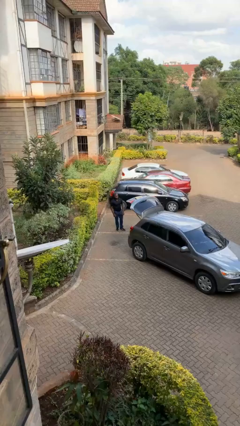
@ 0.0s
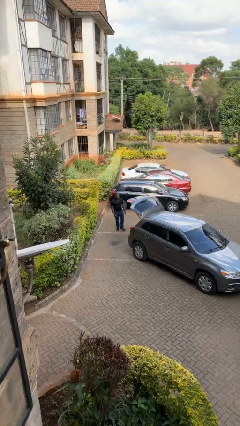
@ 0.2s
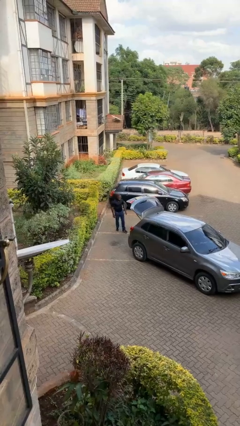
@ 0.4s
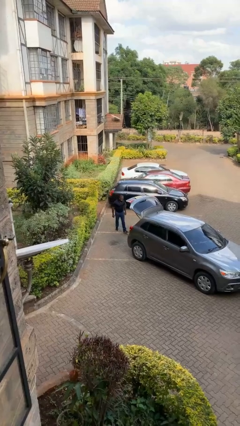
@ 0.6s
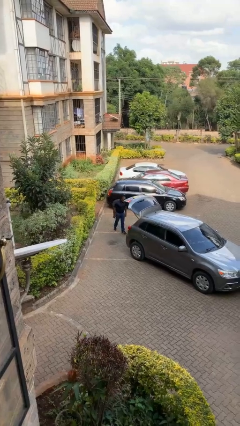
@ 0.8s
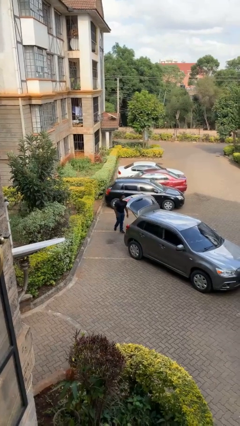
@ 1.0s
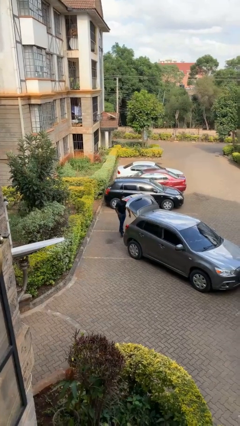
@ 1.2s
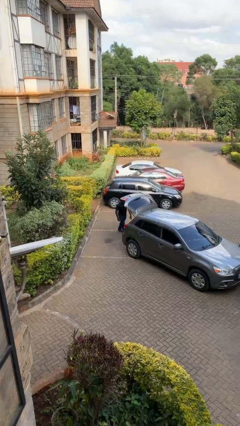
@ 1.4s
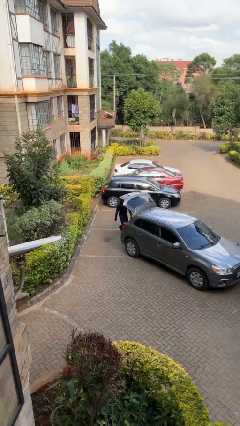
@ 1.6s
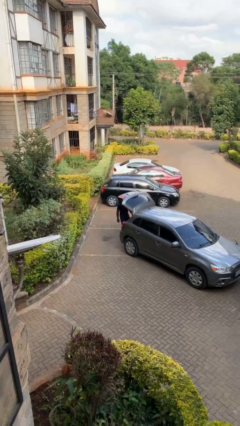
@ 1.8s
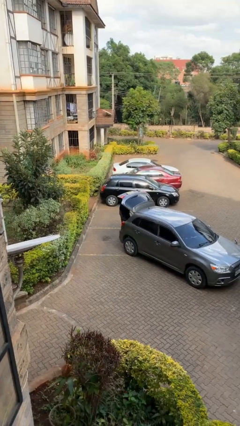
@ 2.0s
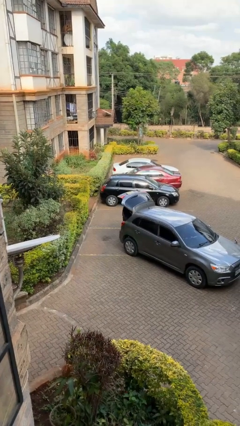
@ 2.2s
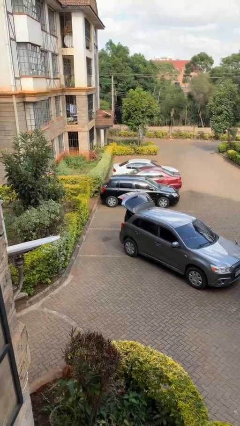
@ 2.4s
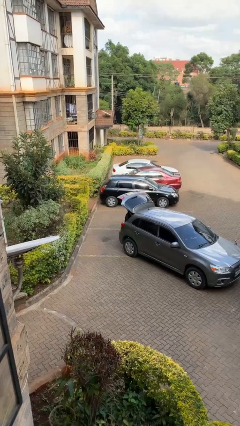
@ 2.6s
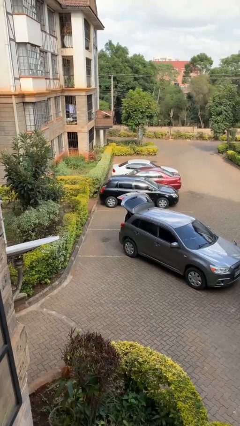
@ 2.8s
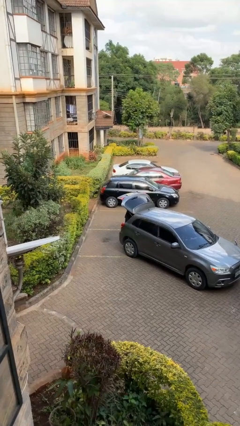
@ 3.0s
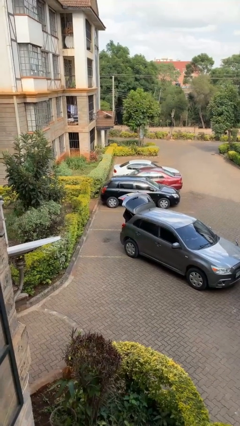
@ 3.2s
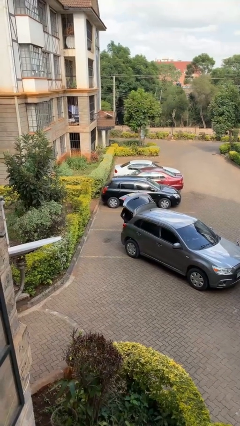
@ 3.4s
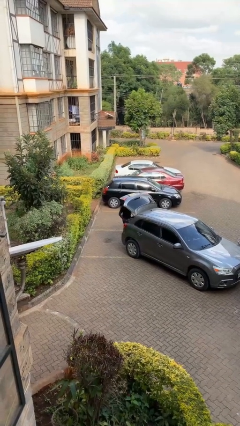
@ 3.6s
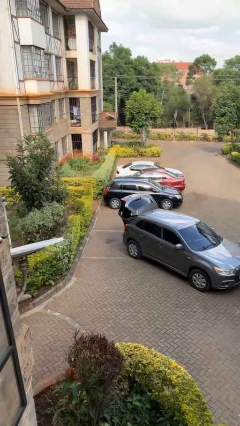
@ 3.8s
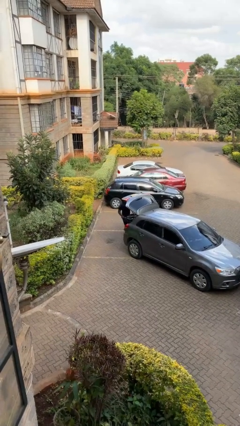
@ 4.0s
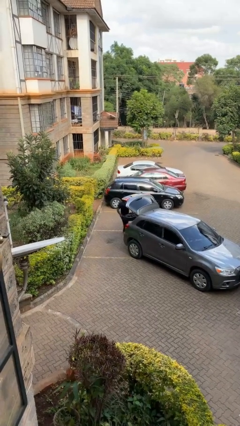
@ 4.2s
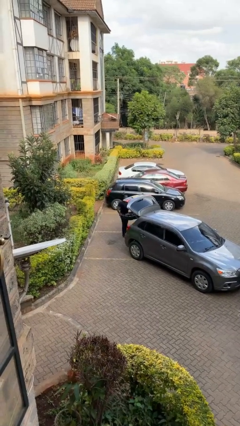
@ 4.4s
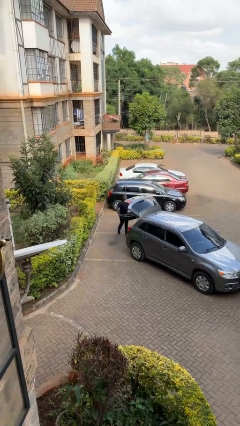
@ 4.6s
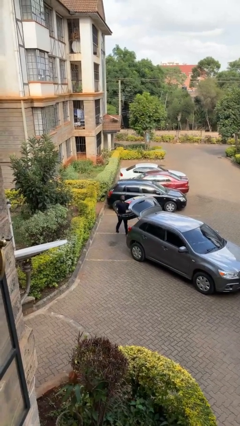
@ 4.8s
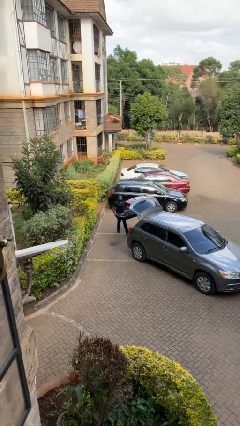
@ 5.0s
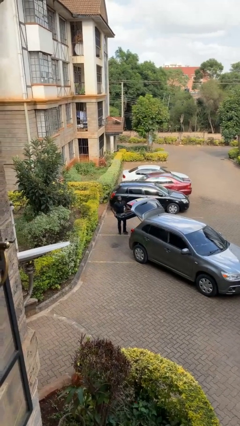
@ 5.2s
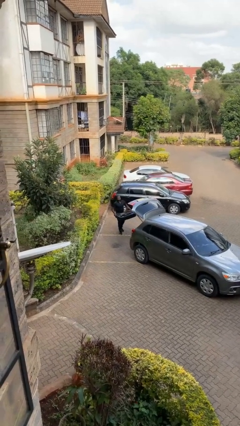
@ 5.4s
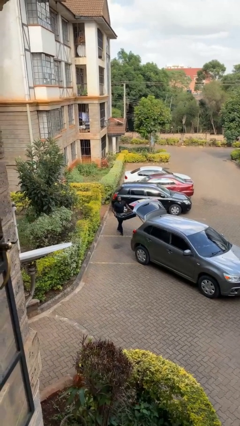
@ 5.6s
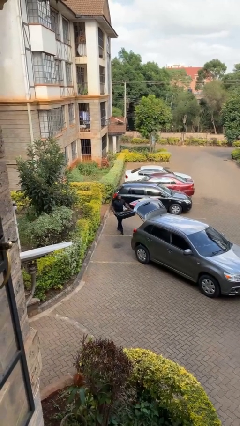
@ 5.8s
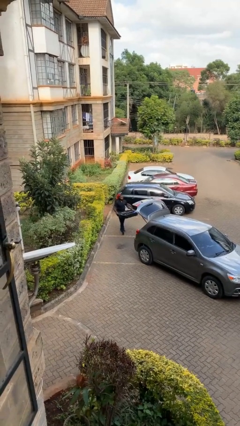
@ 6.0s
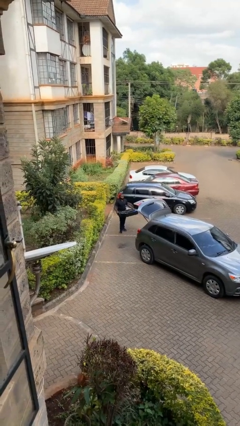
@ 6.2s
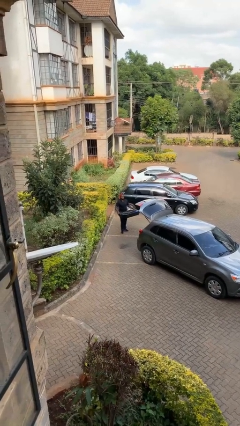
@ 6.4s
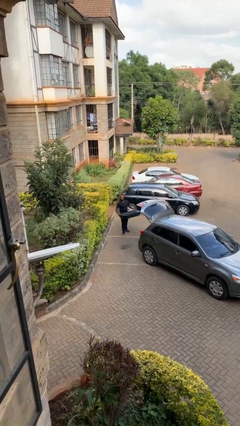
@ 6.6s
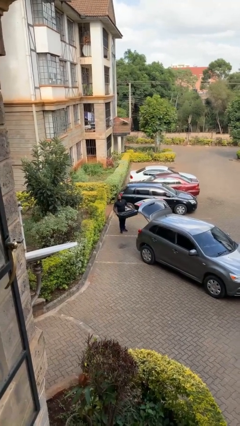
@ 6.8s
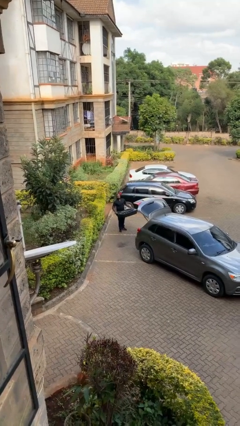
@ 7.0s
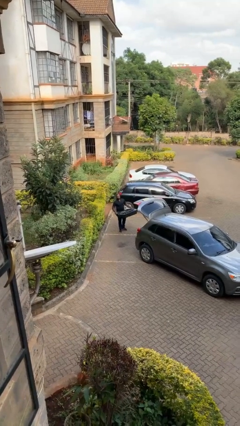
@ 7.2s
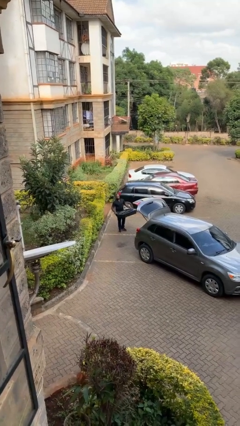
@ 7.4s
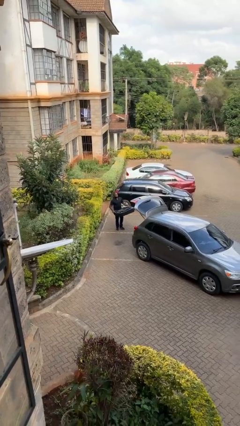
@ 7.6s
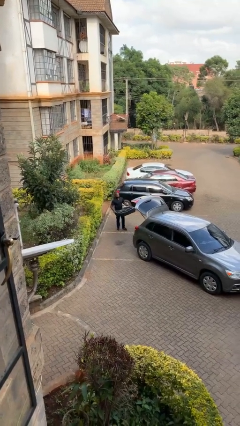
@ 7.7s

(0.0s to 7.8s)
person unloads car

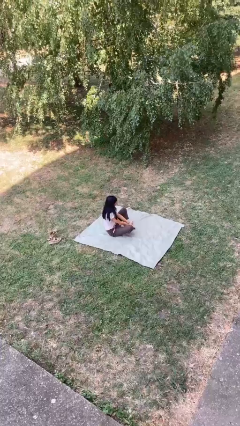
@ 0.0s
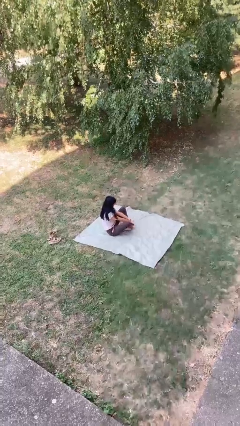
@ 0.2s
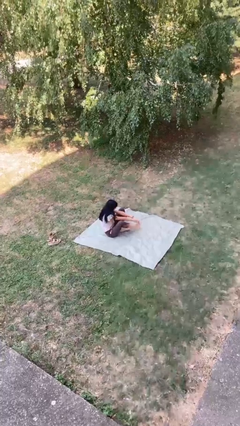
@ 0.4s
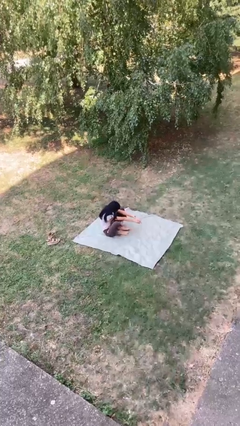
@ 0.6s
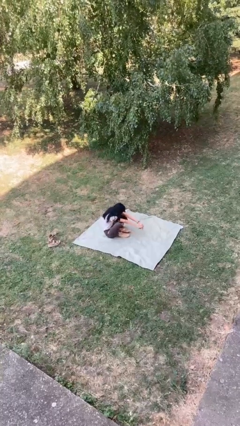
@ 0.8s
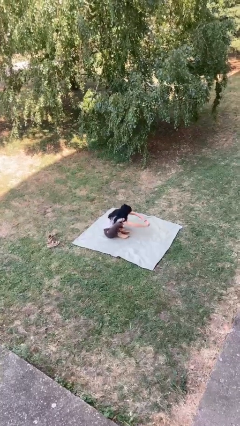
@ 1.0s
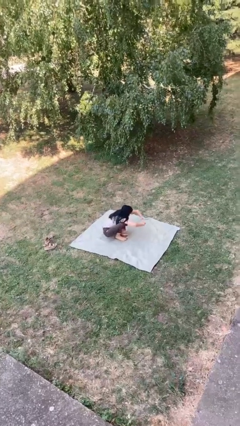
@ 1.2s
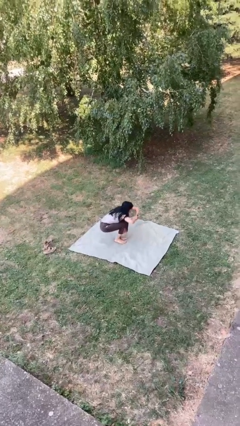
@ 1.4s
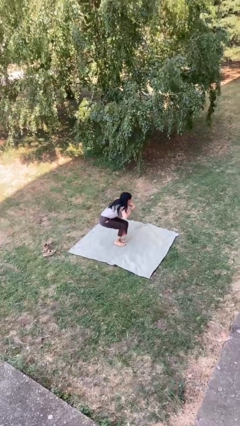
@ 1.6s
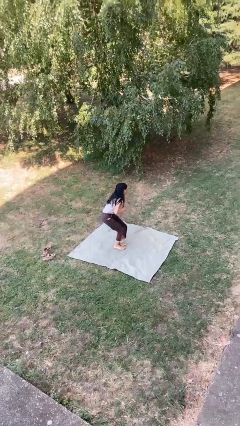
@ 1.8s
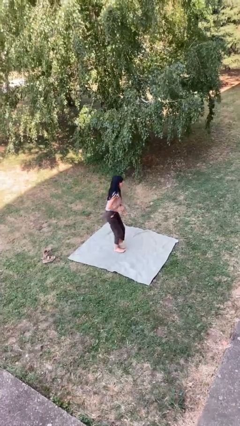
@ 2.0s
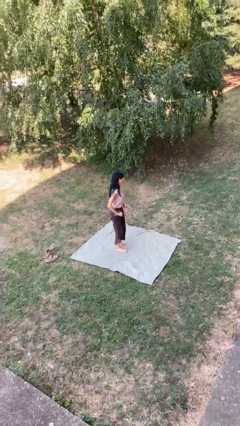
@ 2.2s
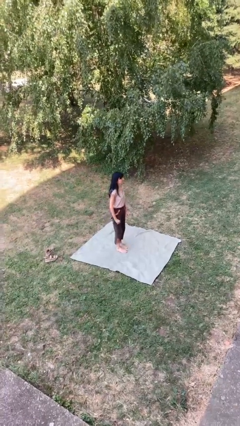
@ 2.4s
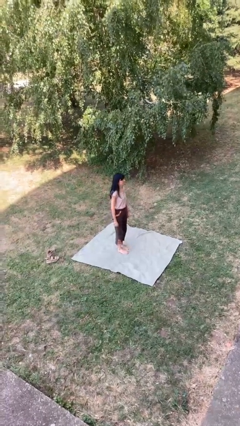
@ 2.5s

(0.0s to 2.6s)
person stands up from floor

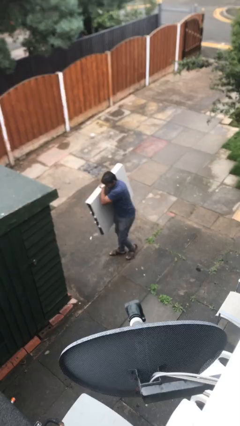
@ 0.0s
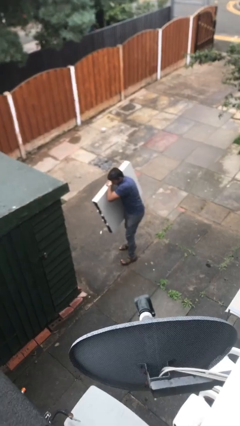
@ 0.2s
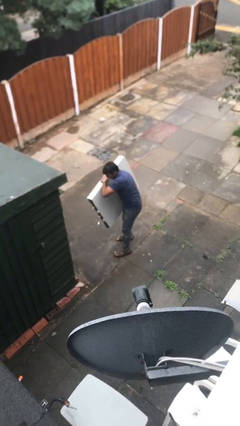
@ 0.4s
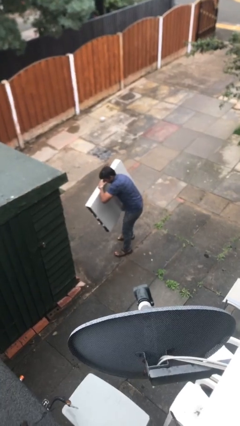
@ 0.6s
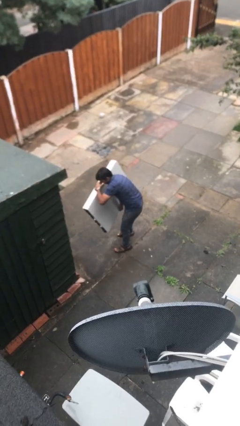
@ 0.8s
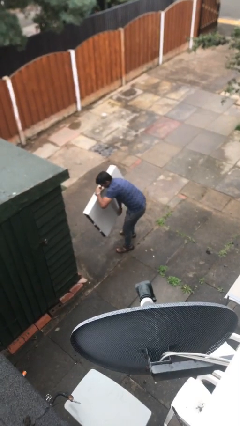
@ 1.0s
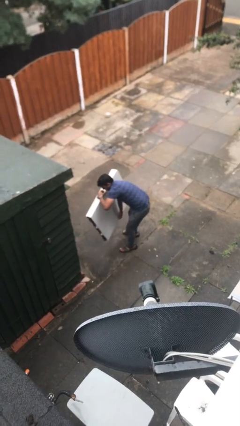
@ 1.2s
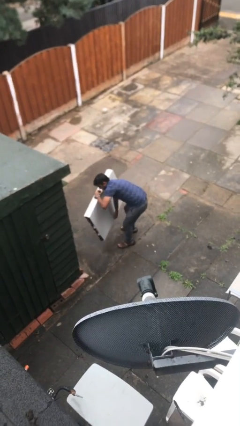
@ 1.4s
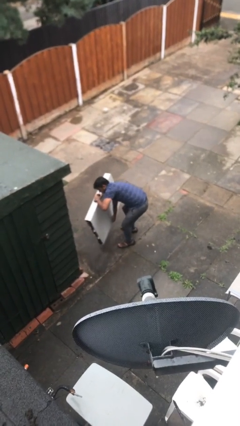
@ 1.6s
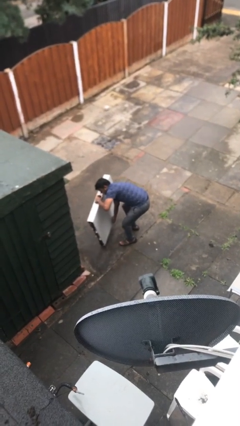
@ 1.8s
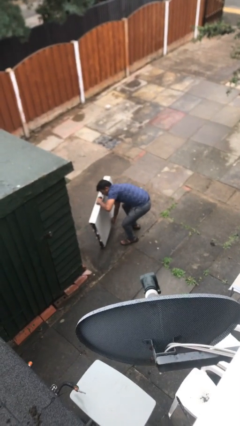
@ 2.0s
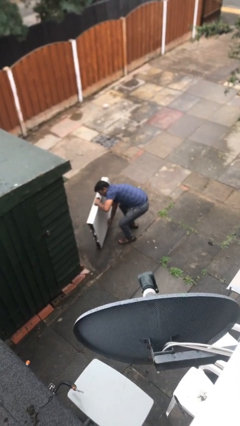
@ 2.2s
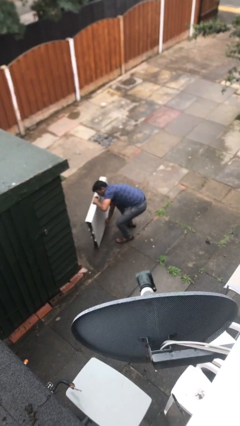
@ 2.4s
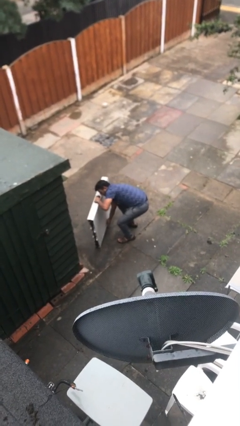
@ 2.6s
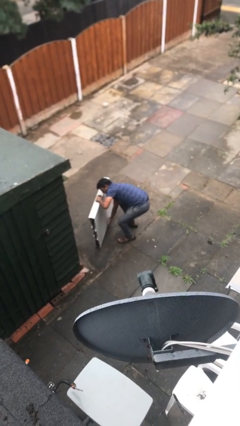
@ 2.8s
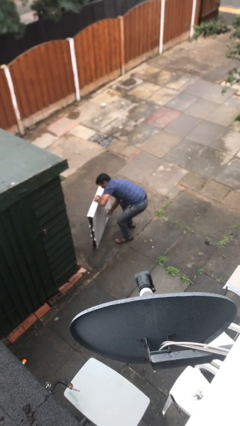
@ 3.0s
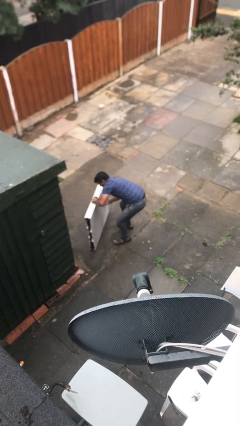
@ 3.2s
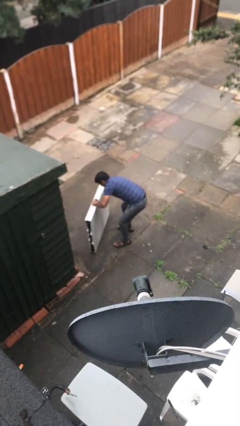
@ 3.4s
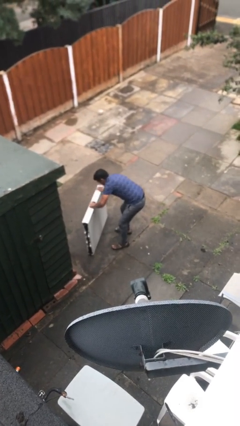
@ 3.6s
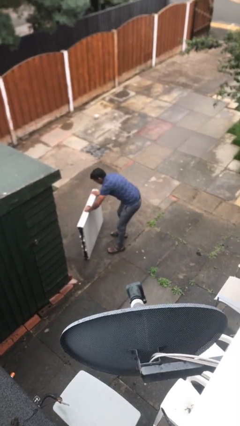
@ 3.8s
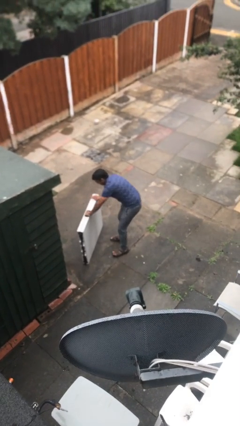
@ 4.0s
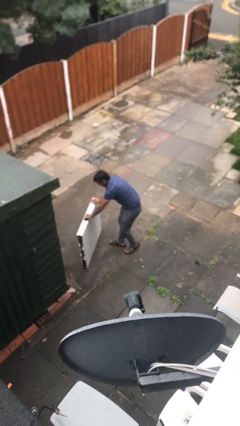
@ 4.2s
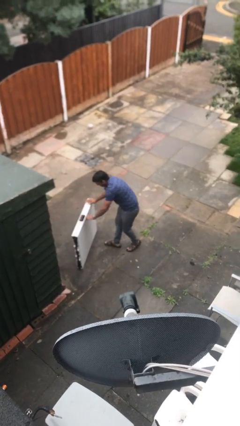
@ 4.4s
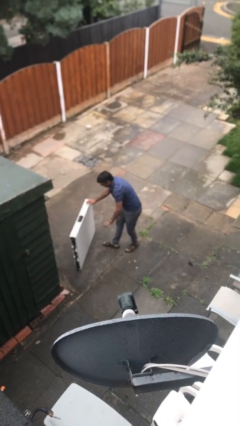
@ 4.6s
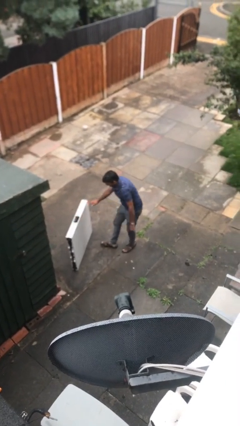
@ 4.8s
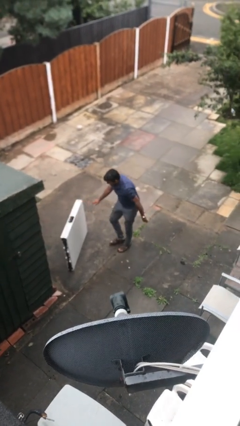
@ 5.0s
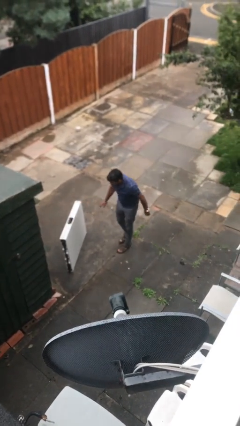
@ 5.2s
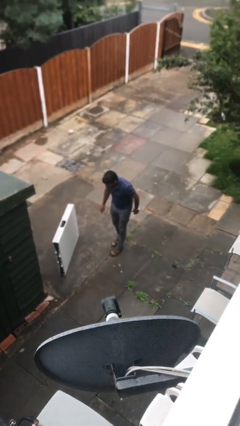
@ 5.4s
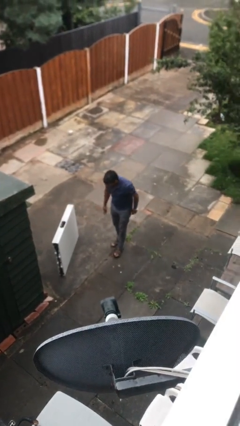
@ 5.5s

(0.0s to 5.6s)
person puts down object on floor

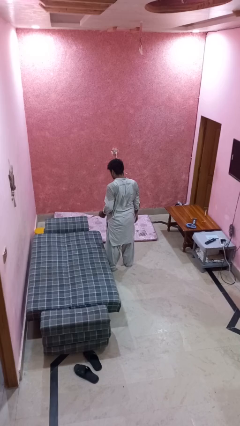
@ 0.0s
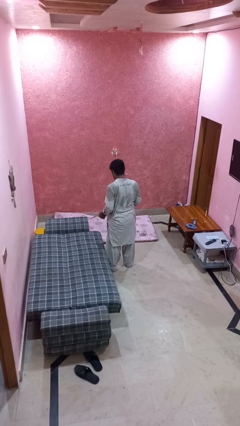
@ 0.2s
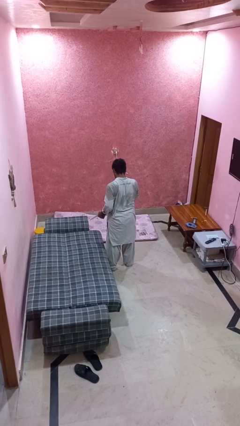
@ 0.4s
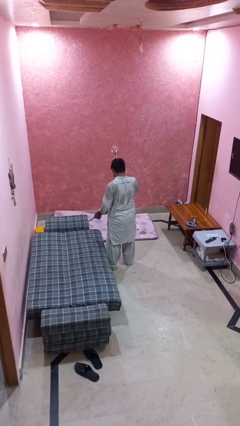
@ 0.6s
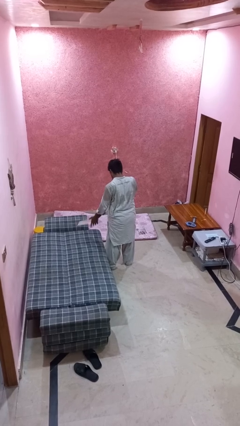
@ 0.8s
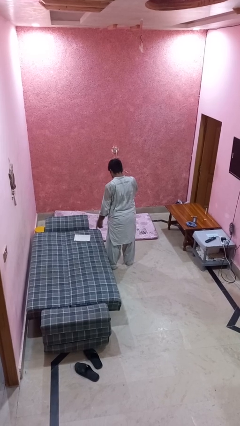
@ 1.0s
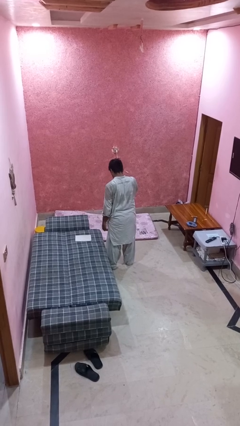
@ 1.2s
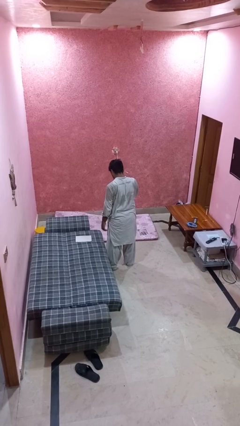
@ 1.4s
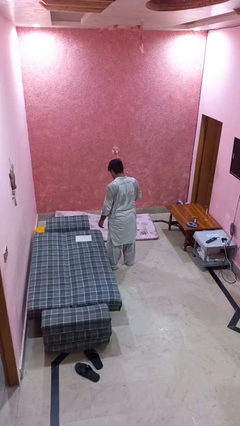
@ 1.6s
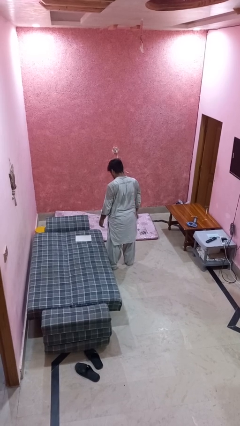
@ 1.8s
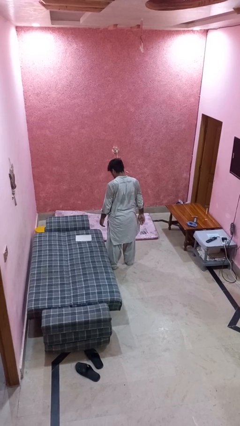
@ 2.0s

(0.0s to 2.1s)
person throws object on bed
